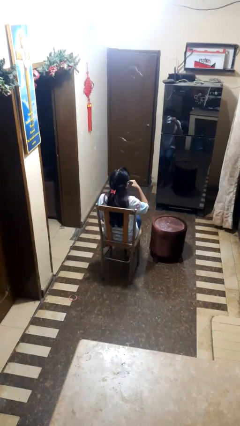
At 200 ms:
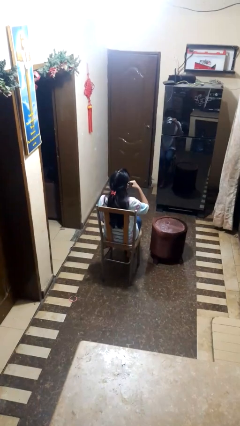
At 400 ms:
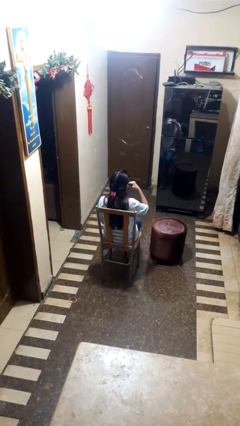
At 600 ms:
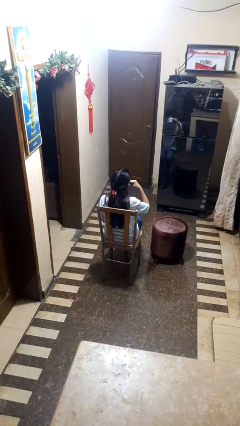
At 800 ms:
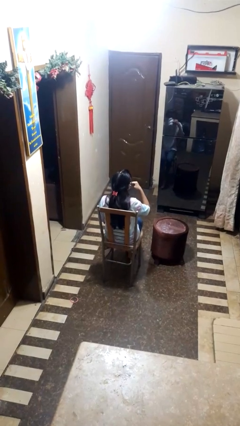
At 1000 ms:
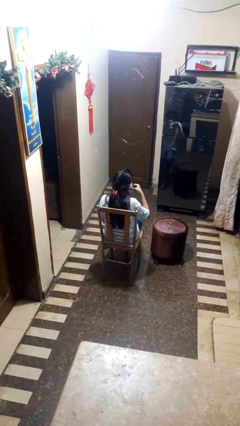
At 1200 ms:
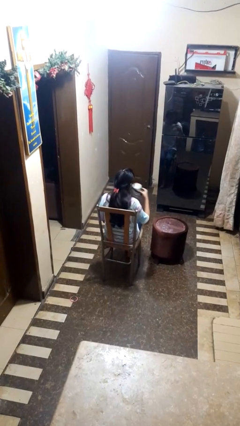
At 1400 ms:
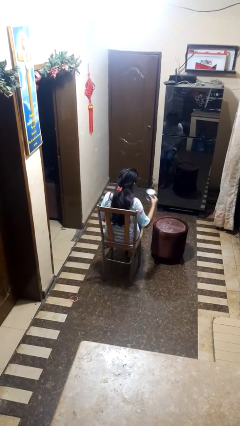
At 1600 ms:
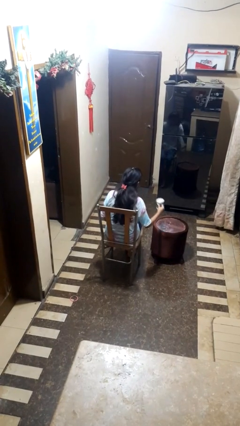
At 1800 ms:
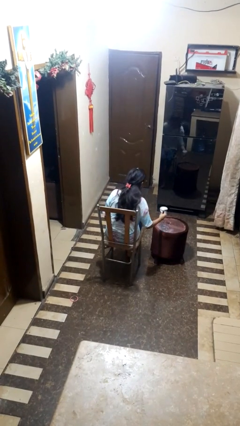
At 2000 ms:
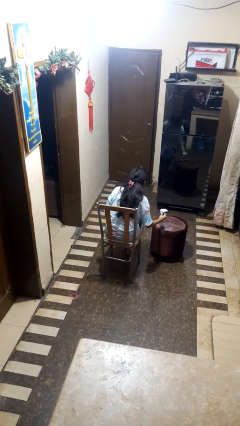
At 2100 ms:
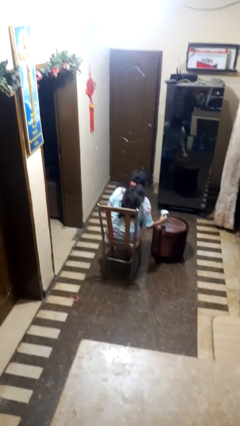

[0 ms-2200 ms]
person puts down object on table

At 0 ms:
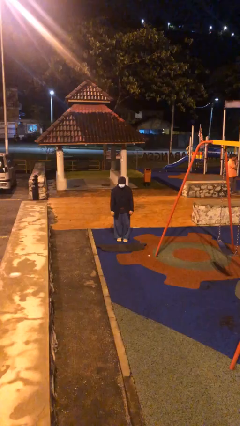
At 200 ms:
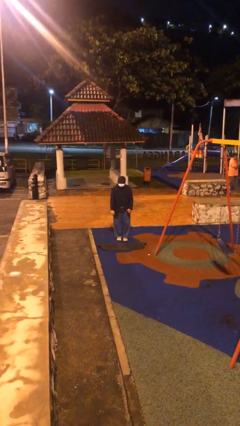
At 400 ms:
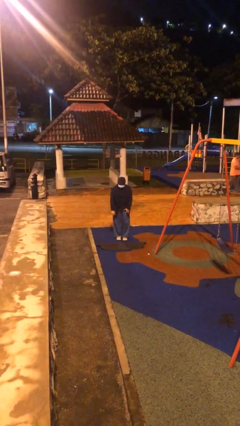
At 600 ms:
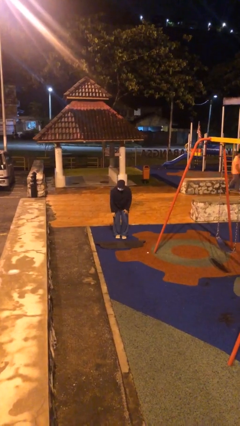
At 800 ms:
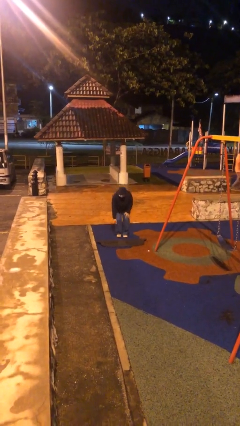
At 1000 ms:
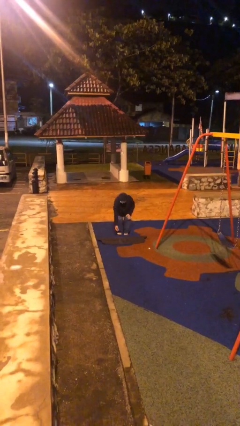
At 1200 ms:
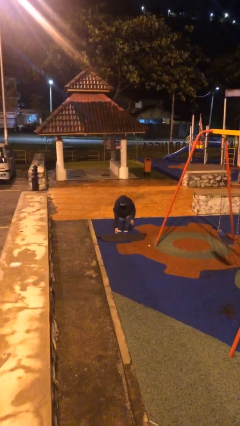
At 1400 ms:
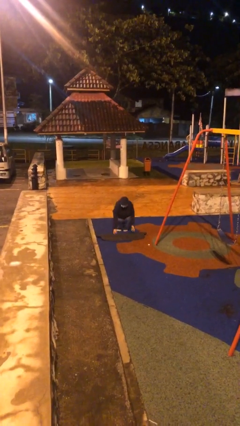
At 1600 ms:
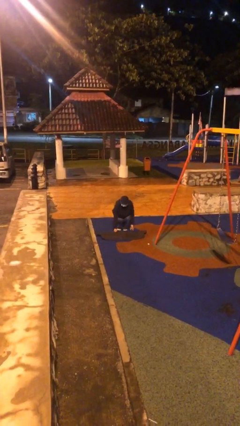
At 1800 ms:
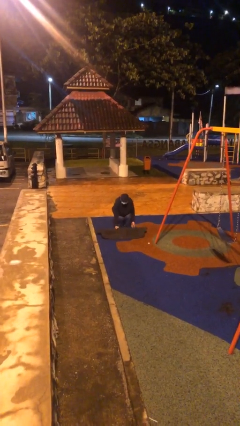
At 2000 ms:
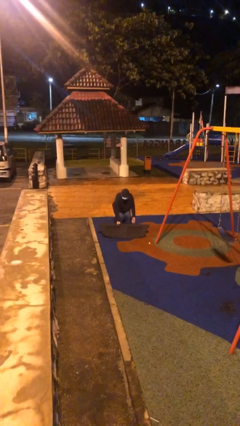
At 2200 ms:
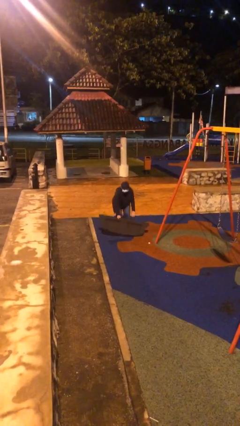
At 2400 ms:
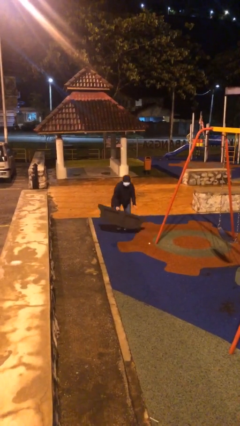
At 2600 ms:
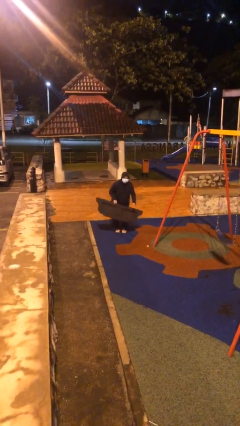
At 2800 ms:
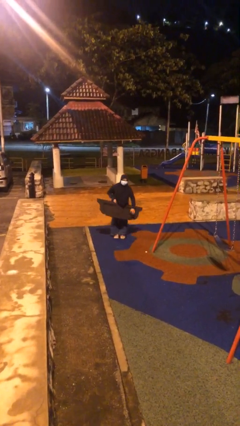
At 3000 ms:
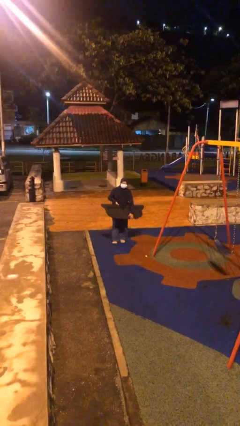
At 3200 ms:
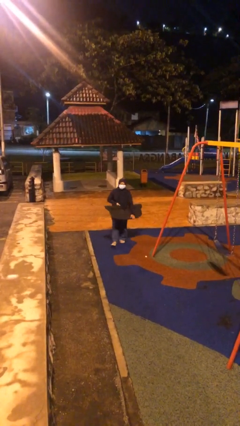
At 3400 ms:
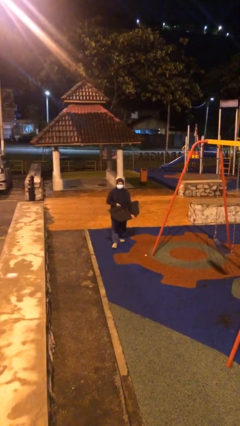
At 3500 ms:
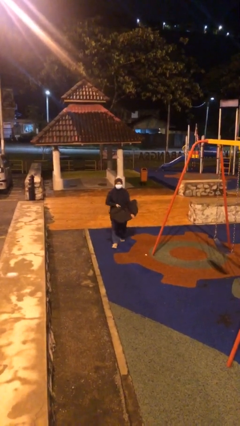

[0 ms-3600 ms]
person picks up object from floor

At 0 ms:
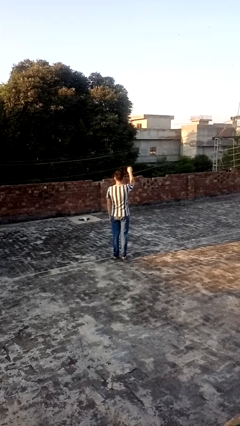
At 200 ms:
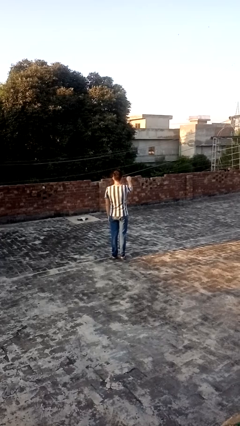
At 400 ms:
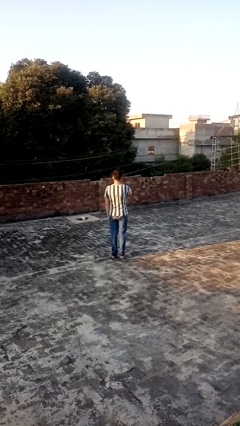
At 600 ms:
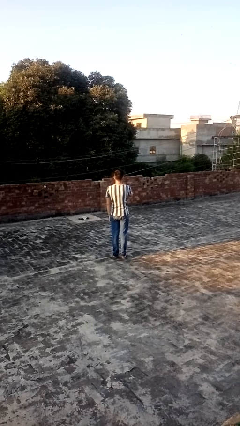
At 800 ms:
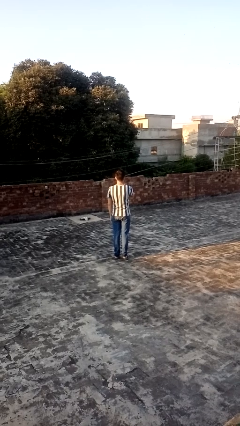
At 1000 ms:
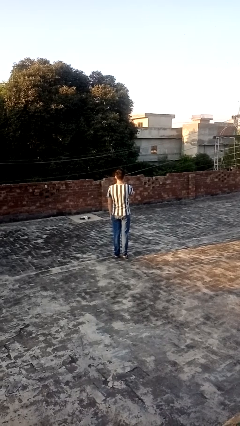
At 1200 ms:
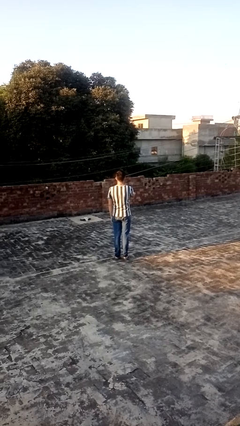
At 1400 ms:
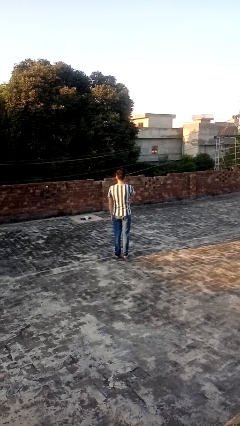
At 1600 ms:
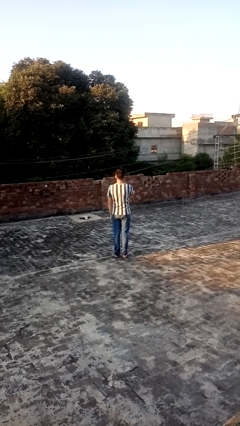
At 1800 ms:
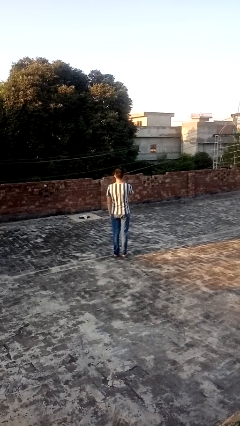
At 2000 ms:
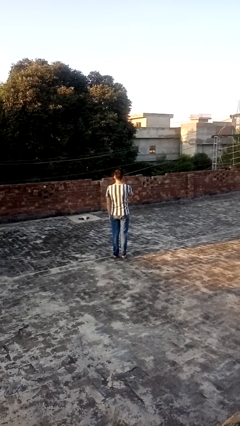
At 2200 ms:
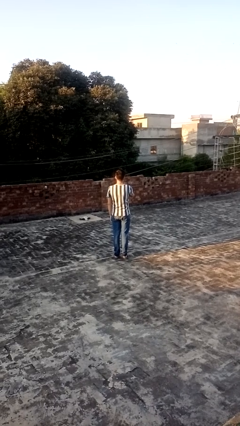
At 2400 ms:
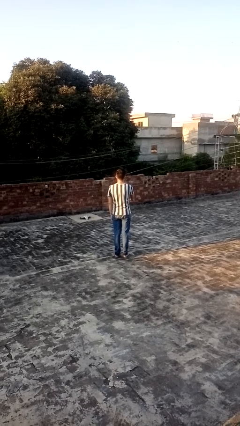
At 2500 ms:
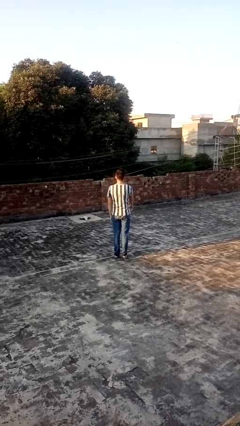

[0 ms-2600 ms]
person gestures swipe down

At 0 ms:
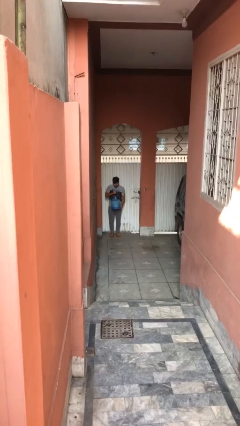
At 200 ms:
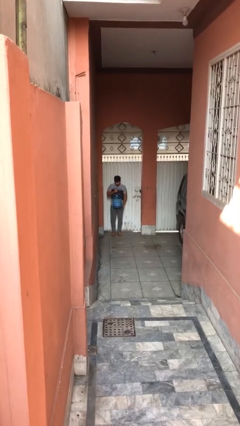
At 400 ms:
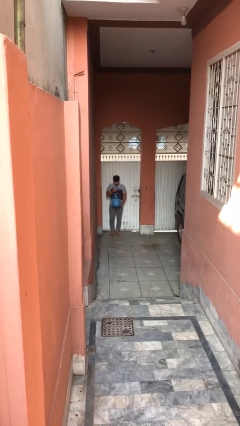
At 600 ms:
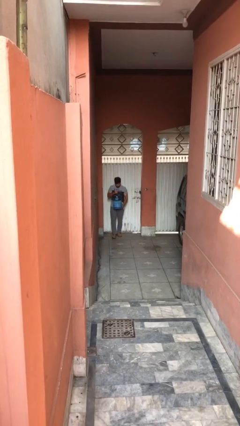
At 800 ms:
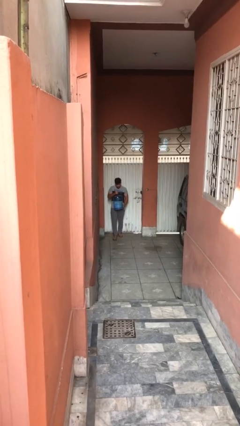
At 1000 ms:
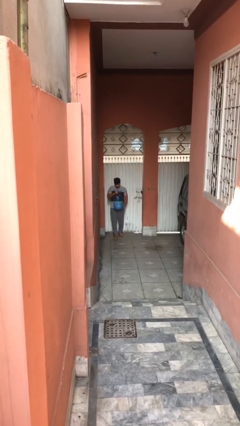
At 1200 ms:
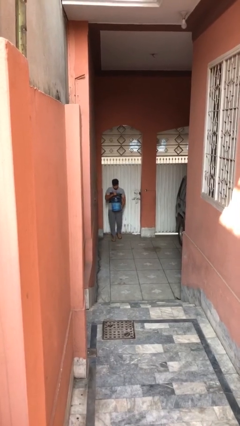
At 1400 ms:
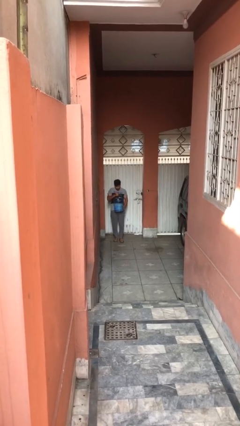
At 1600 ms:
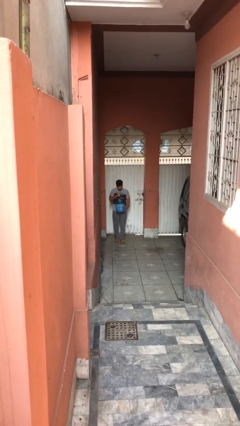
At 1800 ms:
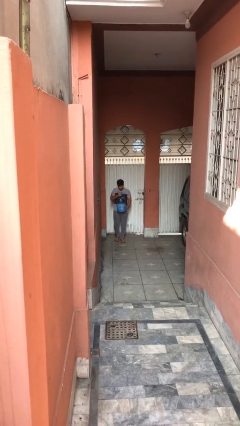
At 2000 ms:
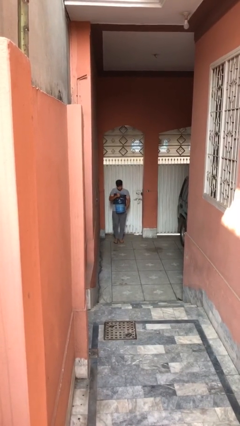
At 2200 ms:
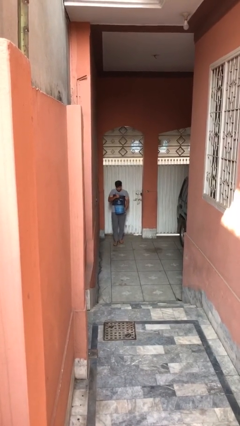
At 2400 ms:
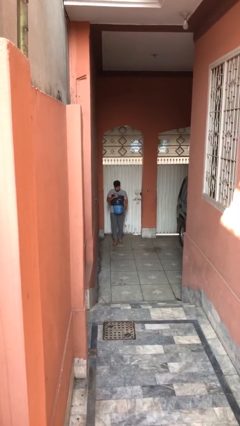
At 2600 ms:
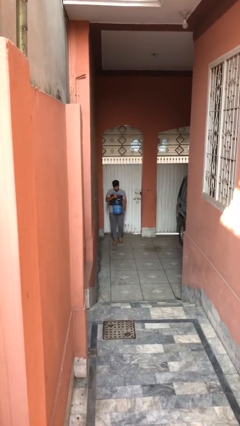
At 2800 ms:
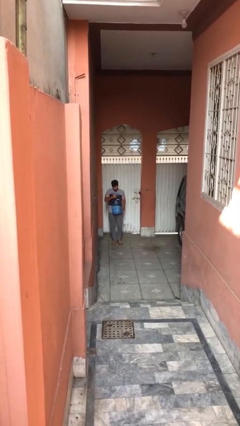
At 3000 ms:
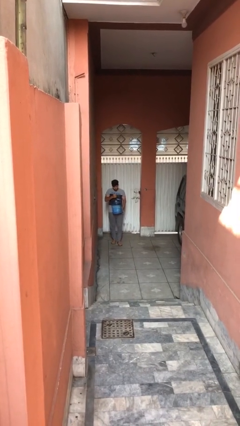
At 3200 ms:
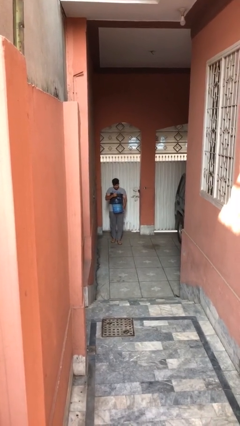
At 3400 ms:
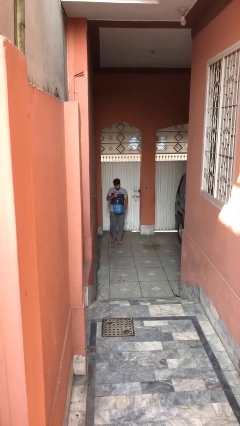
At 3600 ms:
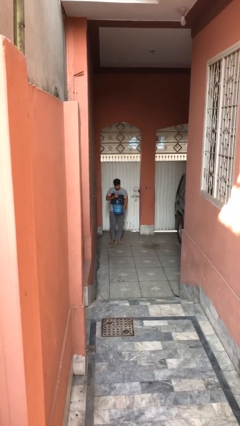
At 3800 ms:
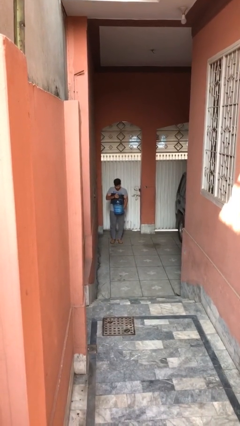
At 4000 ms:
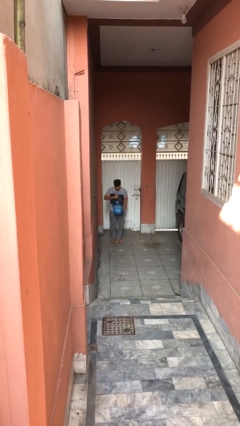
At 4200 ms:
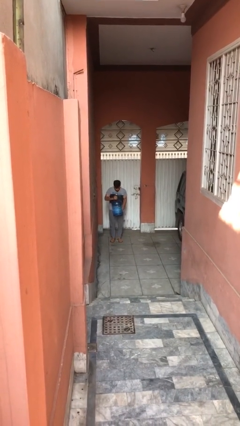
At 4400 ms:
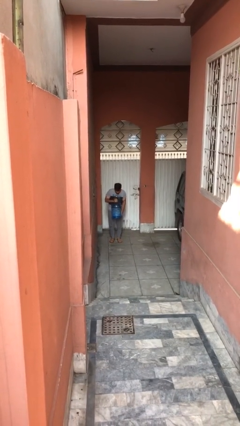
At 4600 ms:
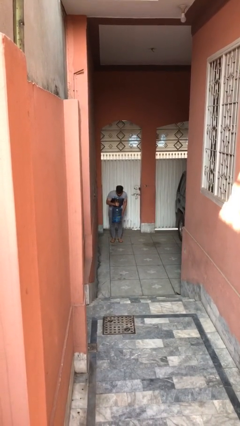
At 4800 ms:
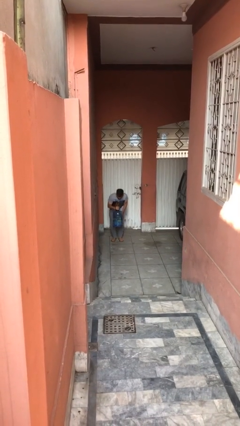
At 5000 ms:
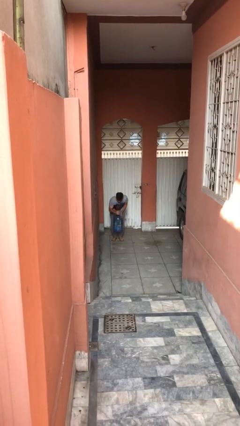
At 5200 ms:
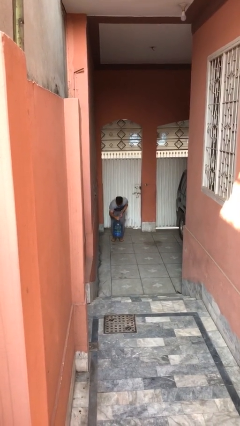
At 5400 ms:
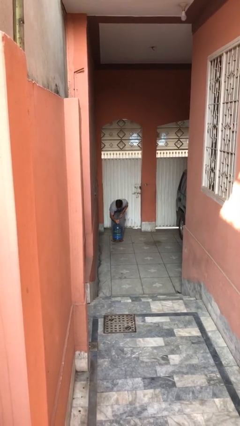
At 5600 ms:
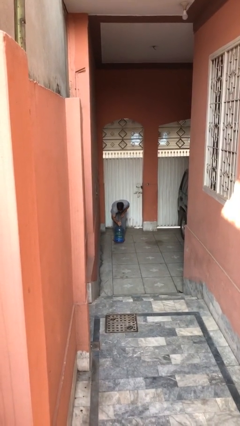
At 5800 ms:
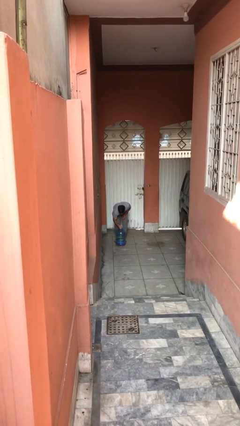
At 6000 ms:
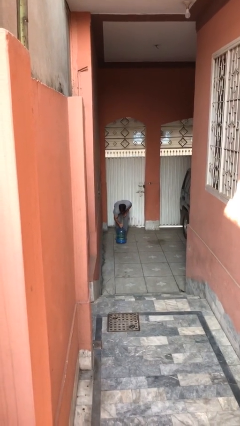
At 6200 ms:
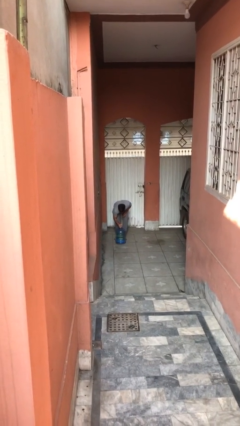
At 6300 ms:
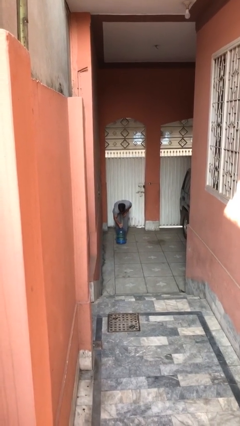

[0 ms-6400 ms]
person carries heavy object

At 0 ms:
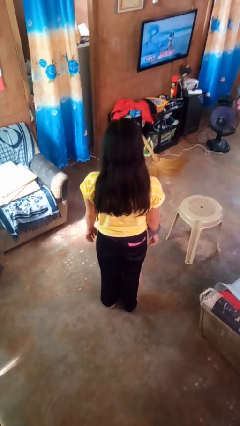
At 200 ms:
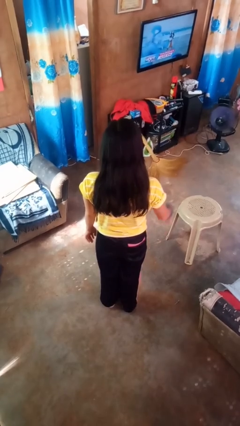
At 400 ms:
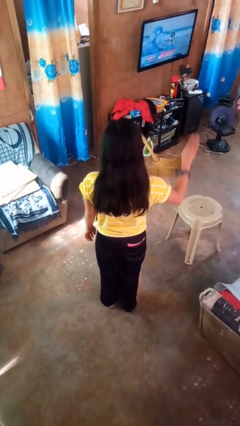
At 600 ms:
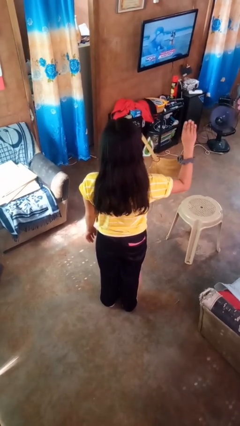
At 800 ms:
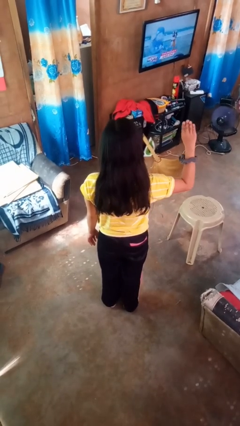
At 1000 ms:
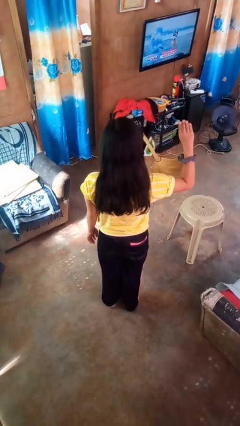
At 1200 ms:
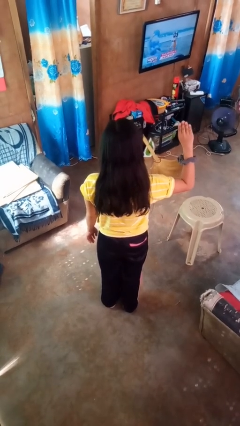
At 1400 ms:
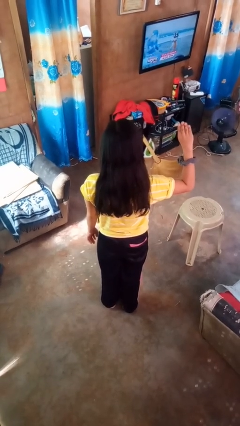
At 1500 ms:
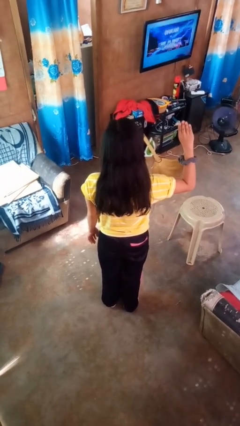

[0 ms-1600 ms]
person gestures number four

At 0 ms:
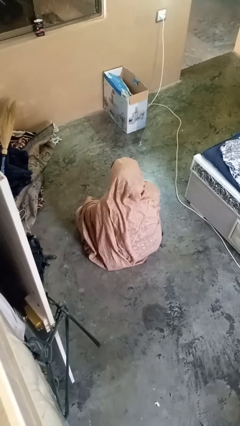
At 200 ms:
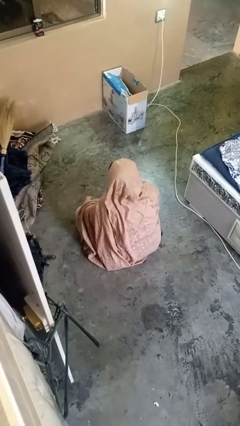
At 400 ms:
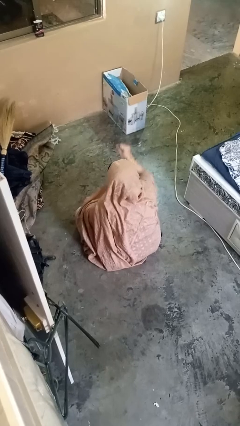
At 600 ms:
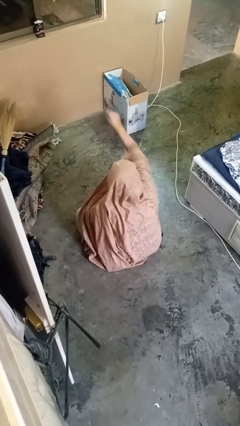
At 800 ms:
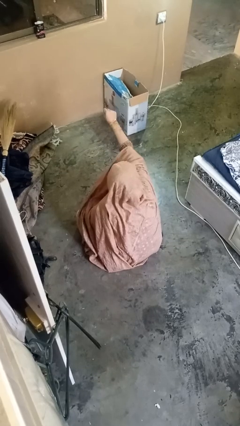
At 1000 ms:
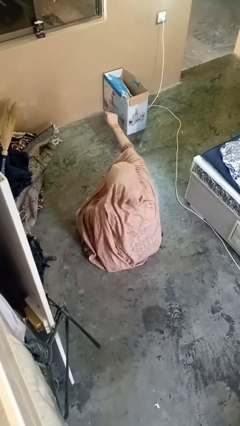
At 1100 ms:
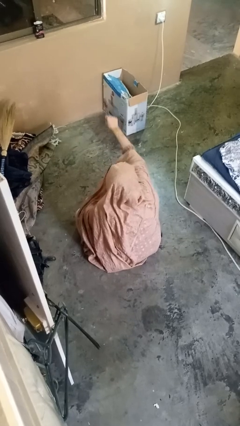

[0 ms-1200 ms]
person punches
